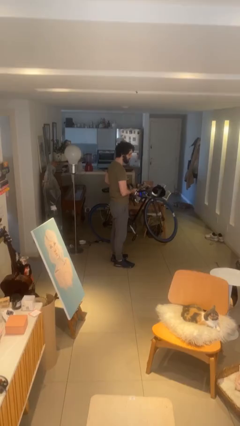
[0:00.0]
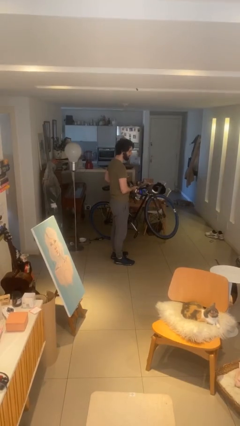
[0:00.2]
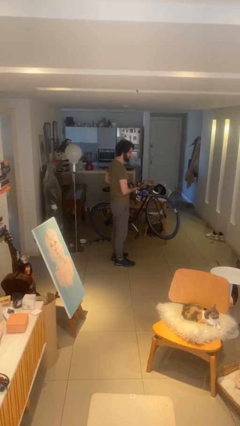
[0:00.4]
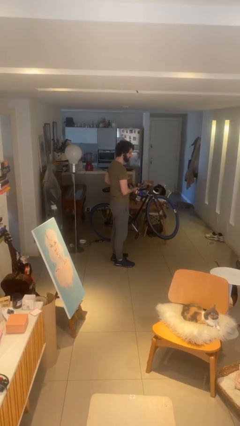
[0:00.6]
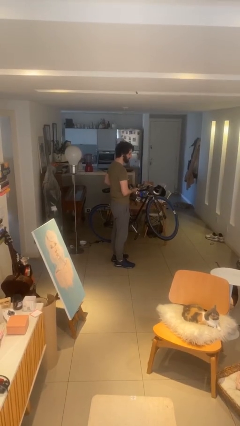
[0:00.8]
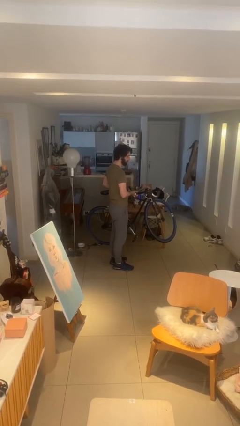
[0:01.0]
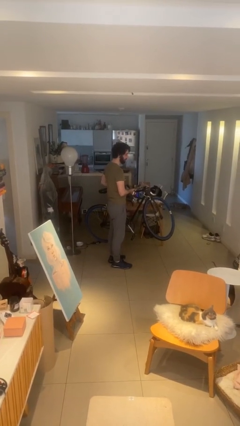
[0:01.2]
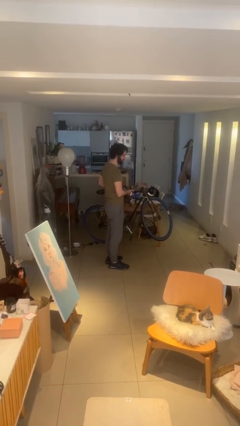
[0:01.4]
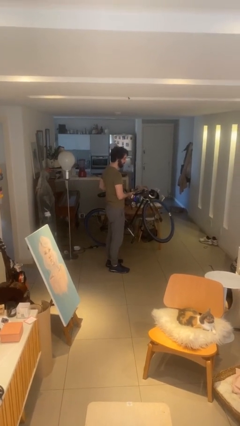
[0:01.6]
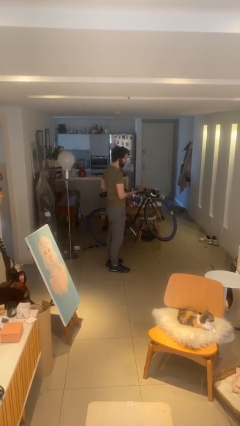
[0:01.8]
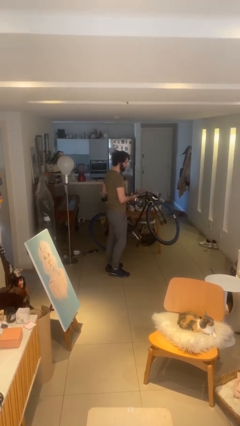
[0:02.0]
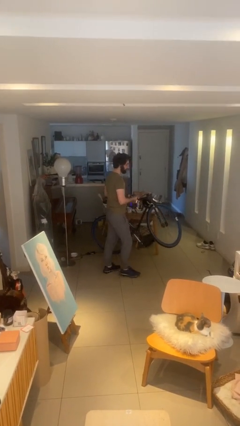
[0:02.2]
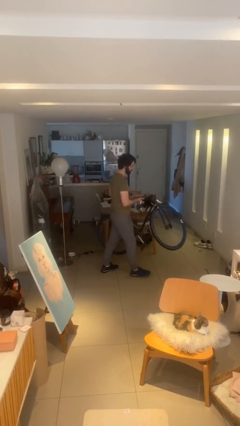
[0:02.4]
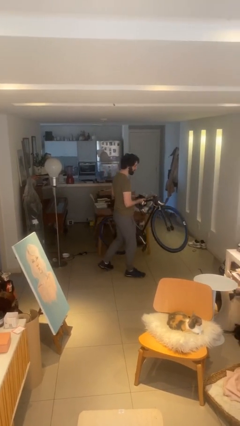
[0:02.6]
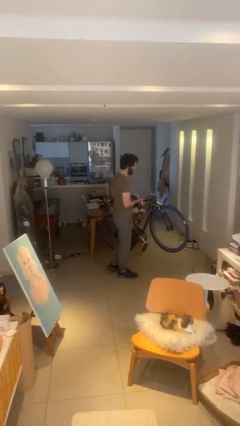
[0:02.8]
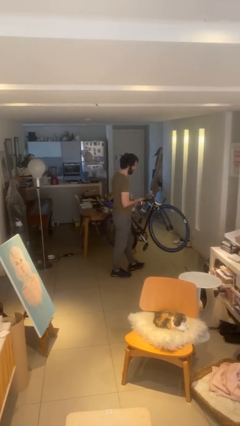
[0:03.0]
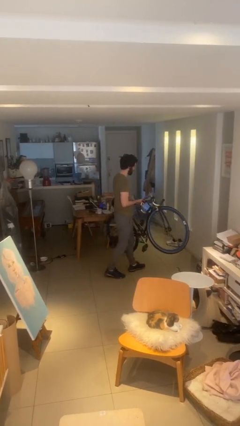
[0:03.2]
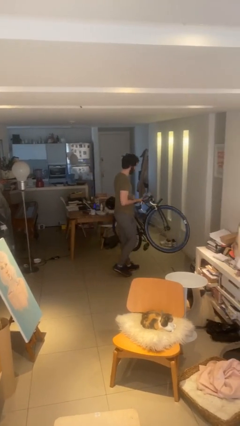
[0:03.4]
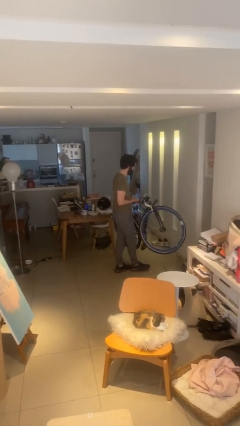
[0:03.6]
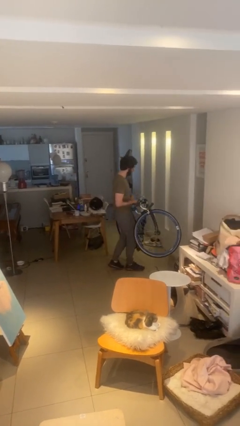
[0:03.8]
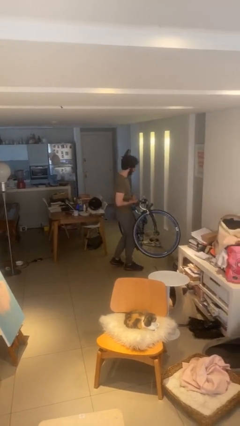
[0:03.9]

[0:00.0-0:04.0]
person carries heavy object

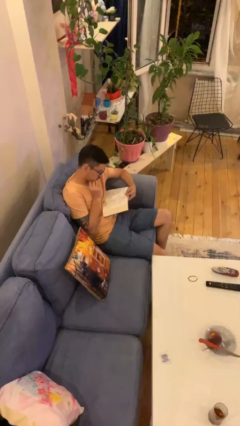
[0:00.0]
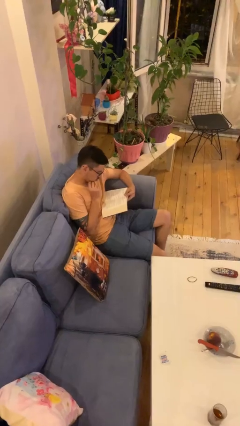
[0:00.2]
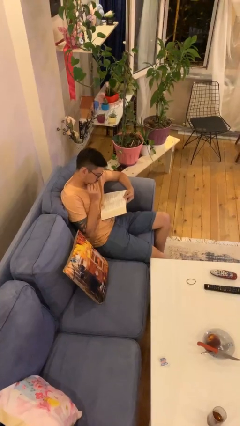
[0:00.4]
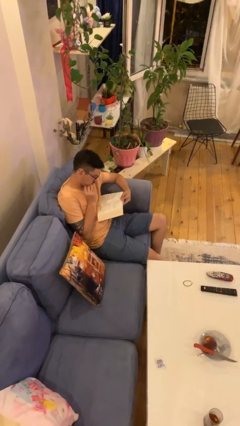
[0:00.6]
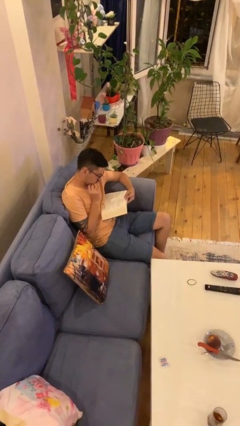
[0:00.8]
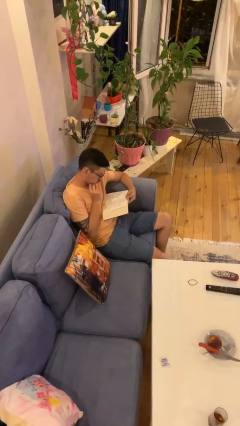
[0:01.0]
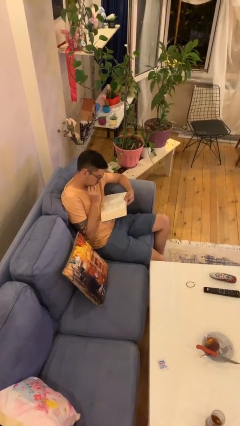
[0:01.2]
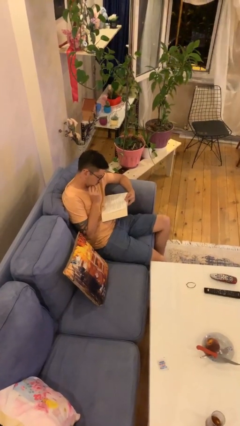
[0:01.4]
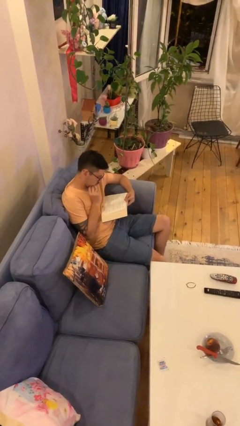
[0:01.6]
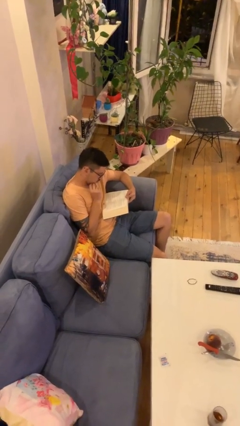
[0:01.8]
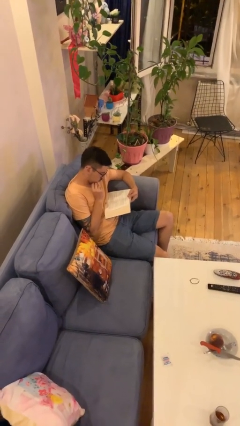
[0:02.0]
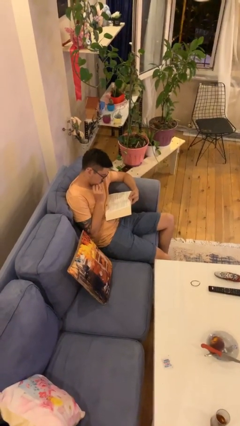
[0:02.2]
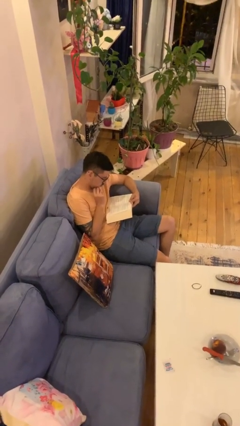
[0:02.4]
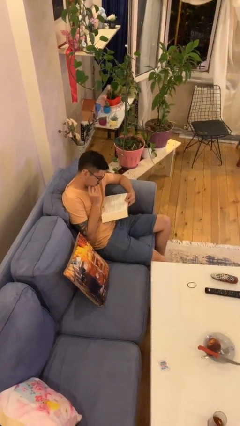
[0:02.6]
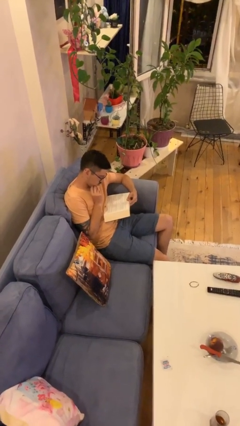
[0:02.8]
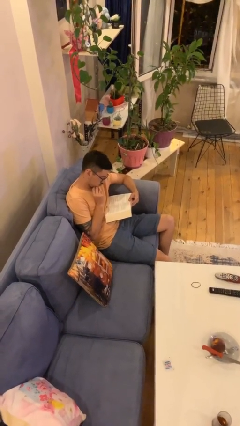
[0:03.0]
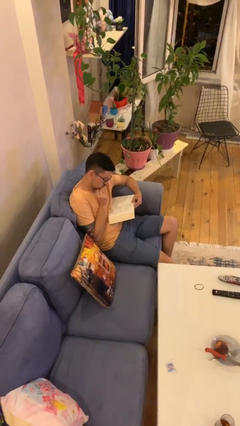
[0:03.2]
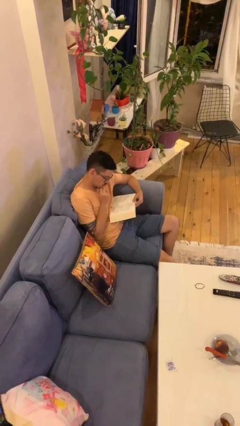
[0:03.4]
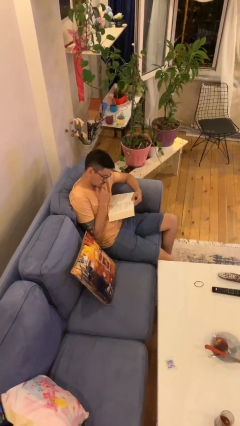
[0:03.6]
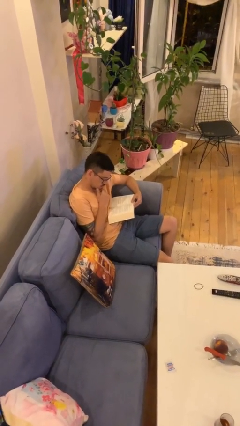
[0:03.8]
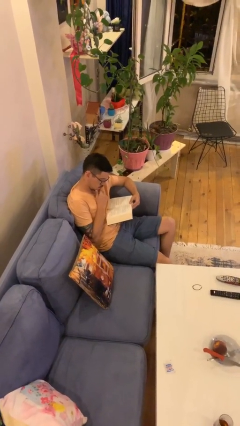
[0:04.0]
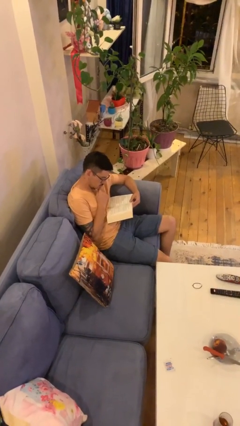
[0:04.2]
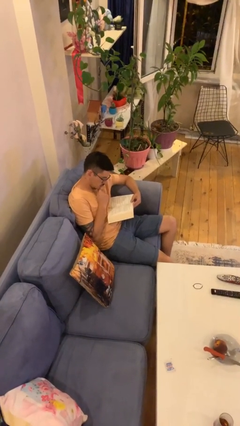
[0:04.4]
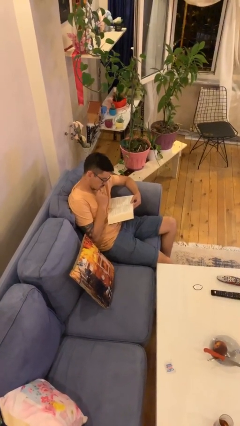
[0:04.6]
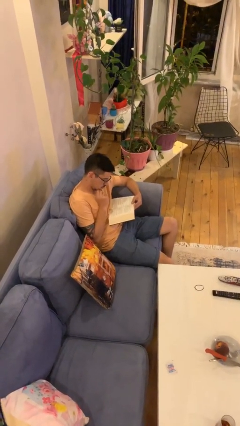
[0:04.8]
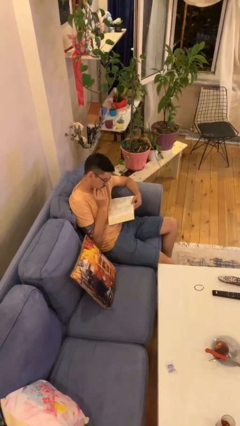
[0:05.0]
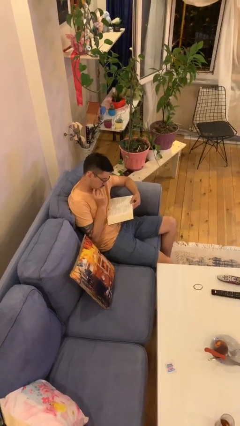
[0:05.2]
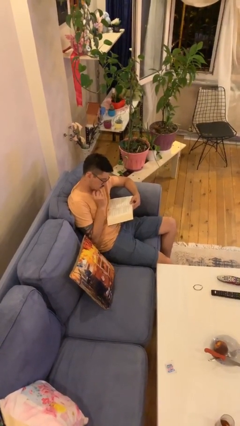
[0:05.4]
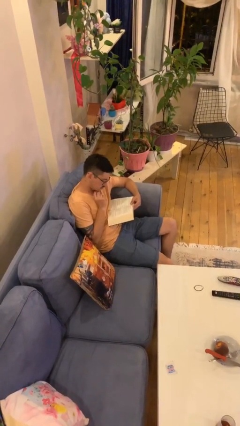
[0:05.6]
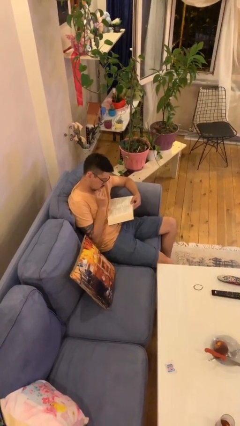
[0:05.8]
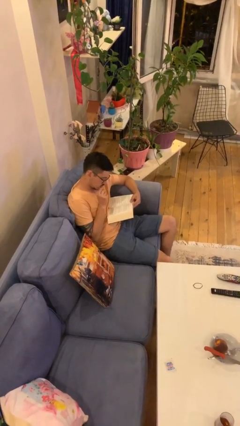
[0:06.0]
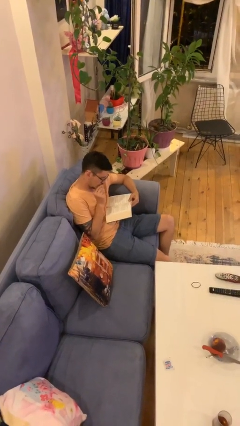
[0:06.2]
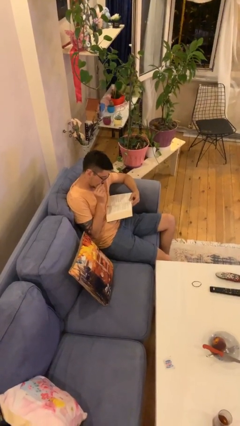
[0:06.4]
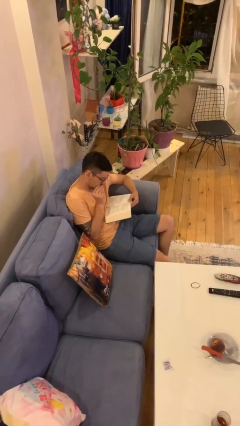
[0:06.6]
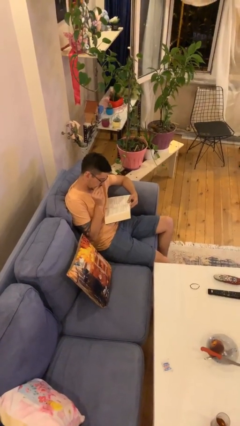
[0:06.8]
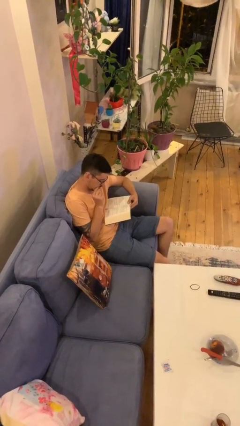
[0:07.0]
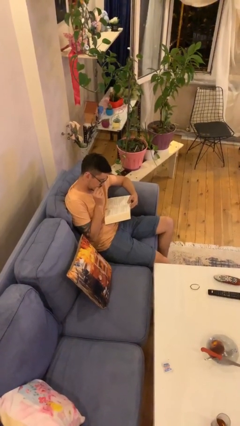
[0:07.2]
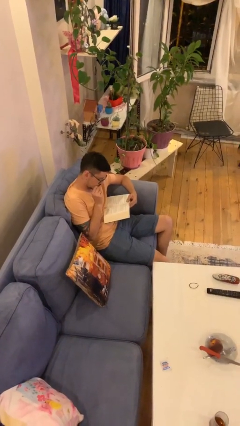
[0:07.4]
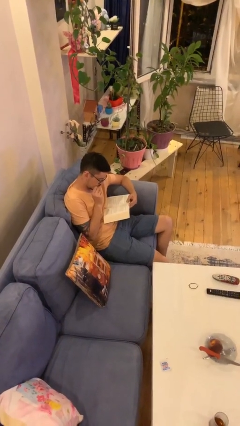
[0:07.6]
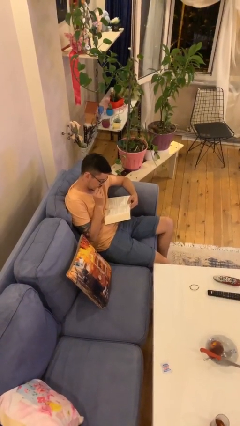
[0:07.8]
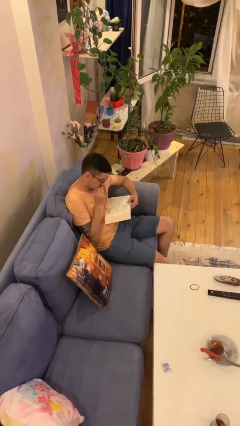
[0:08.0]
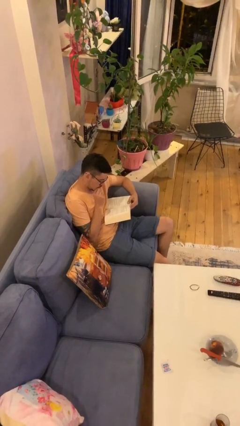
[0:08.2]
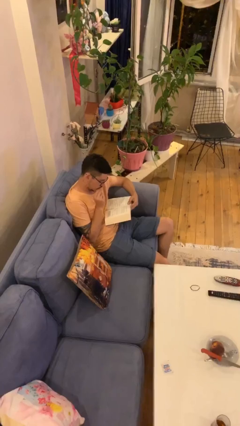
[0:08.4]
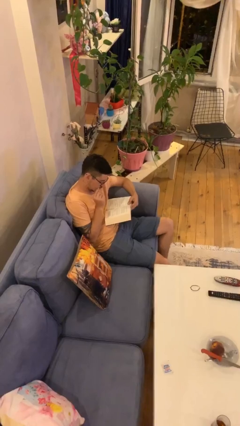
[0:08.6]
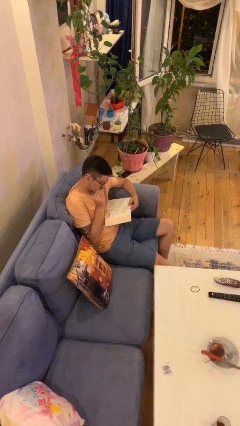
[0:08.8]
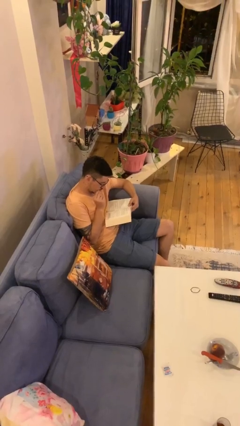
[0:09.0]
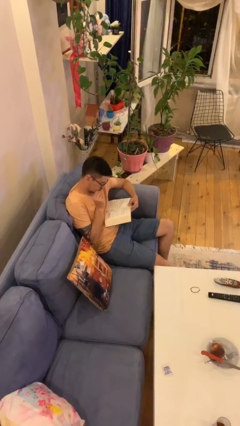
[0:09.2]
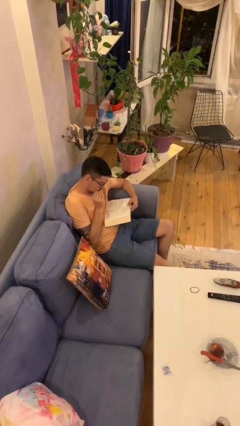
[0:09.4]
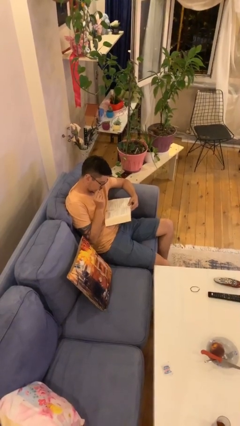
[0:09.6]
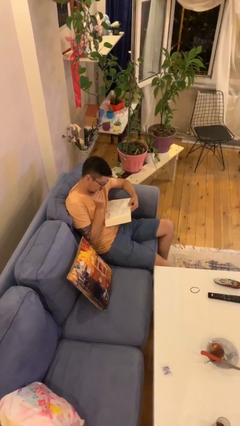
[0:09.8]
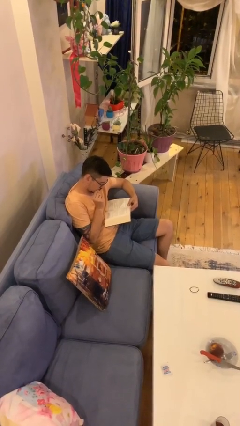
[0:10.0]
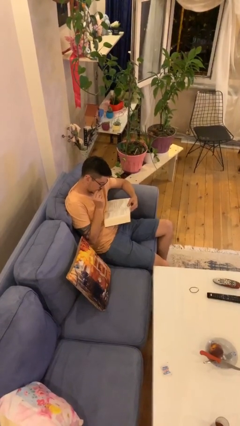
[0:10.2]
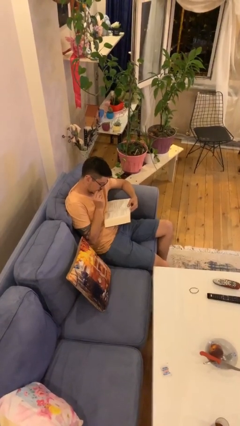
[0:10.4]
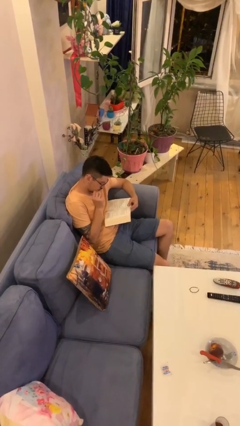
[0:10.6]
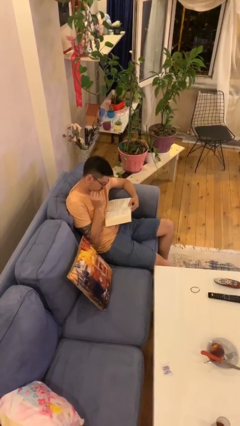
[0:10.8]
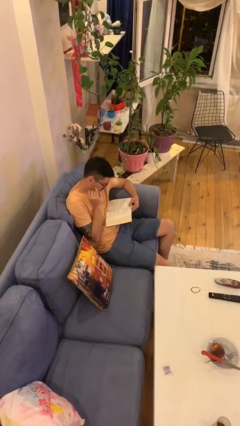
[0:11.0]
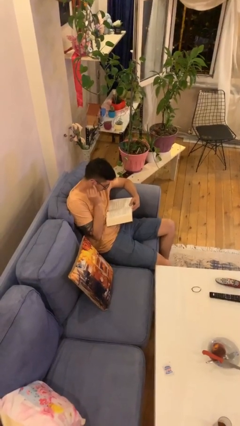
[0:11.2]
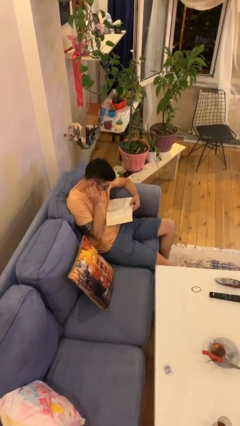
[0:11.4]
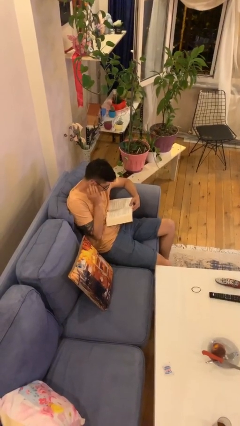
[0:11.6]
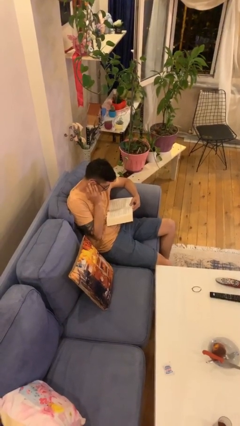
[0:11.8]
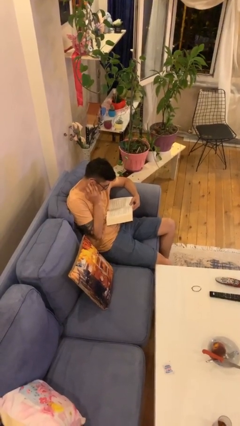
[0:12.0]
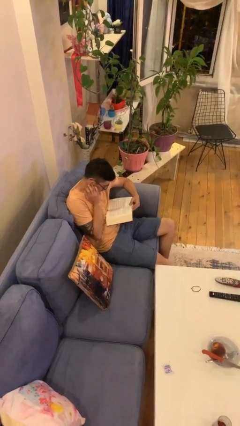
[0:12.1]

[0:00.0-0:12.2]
person reads document

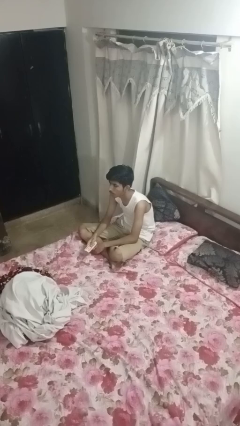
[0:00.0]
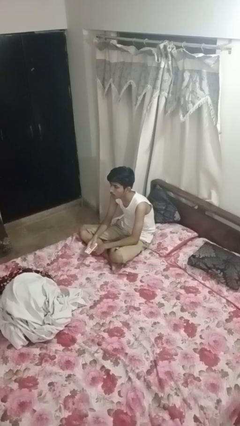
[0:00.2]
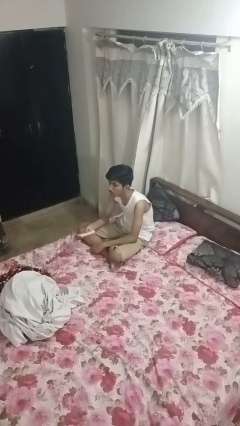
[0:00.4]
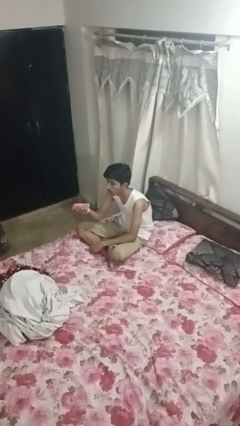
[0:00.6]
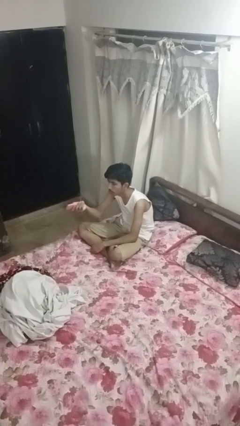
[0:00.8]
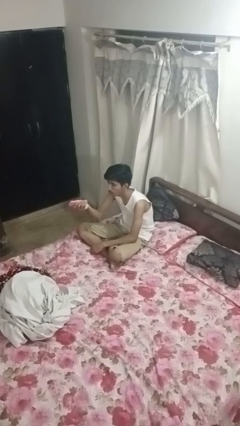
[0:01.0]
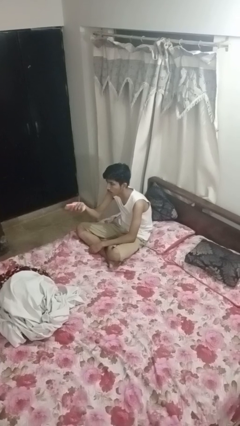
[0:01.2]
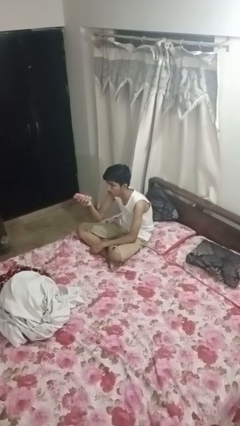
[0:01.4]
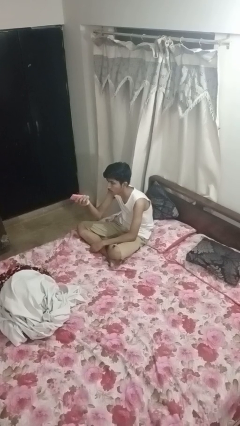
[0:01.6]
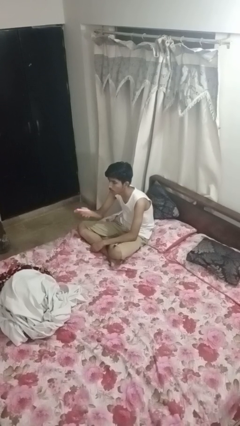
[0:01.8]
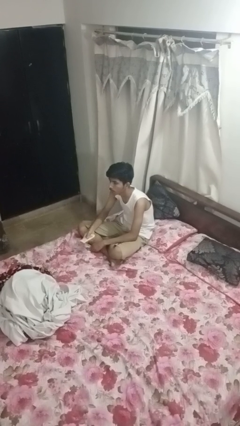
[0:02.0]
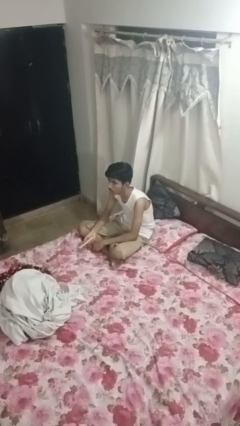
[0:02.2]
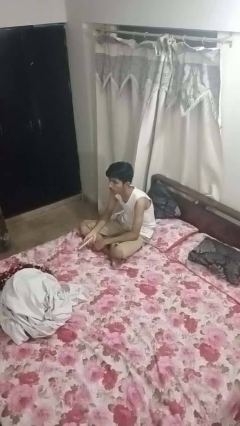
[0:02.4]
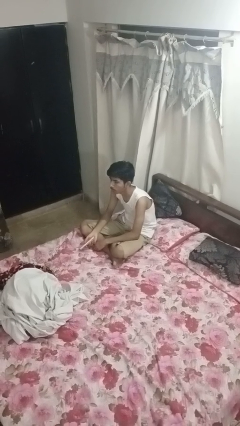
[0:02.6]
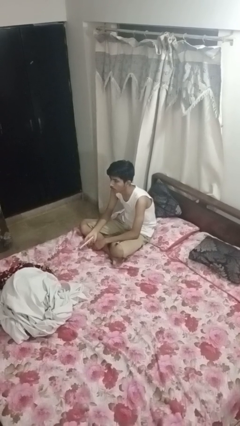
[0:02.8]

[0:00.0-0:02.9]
person uses television remote
